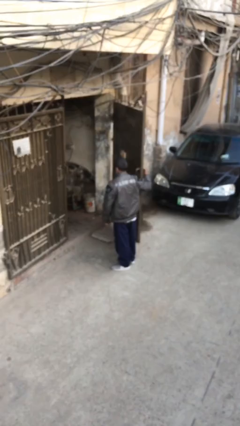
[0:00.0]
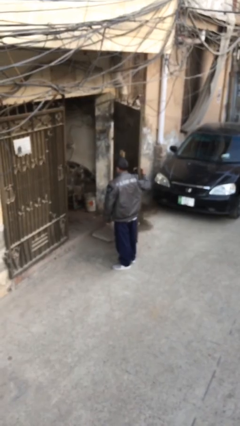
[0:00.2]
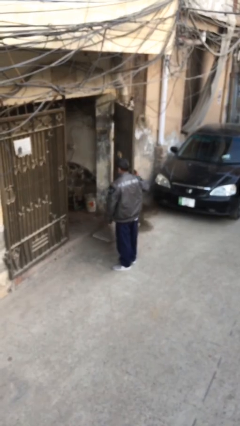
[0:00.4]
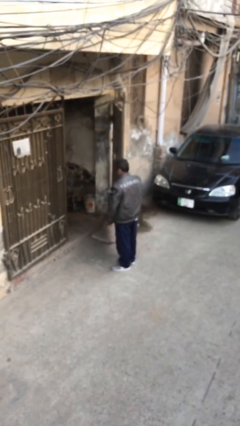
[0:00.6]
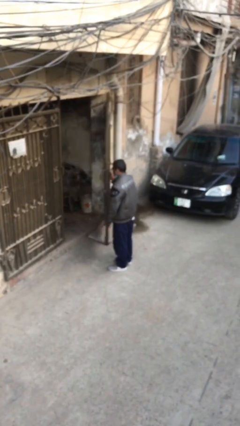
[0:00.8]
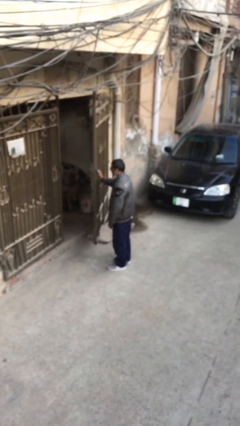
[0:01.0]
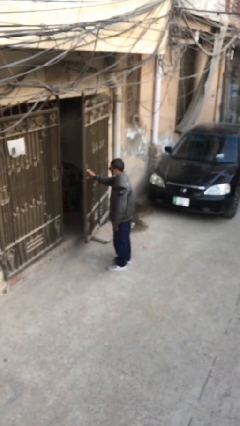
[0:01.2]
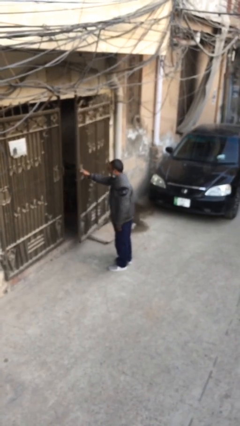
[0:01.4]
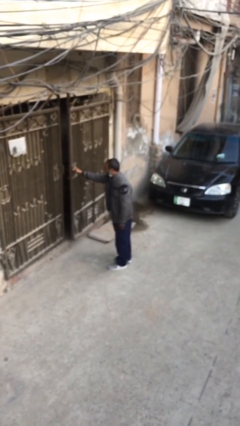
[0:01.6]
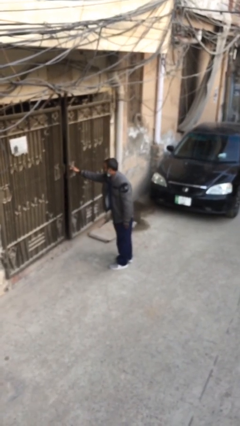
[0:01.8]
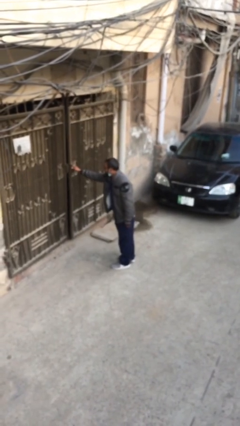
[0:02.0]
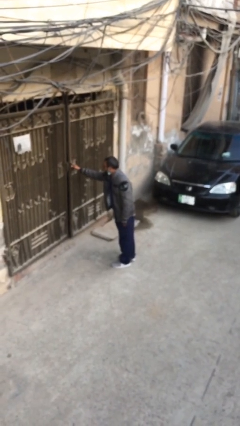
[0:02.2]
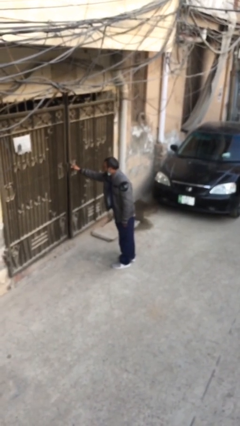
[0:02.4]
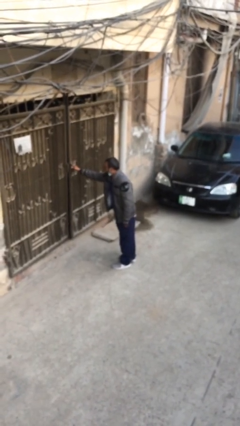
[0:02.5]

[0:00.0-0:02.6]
person closes facility door

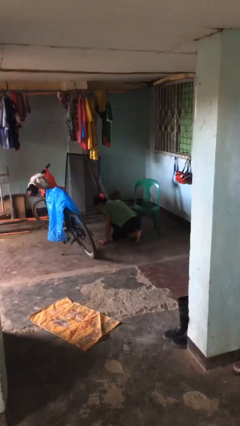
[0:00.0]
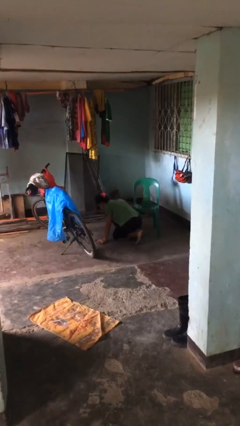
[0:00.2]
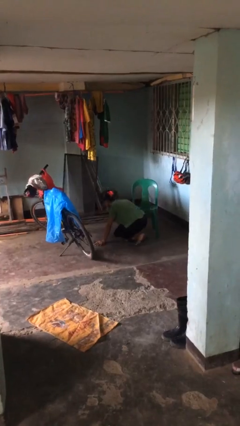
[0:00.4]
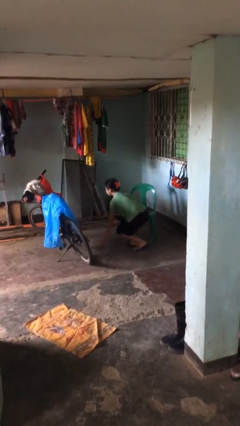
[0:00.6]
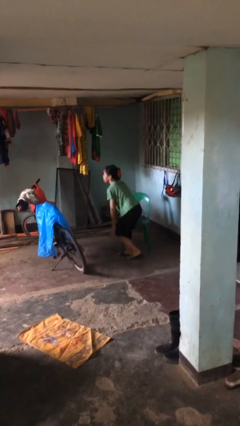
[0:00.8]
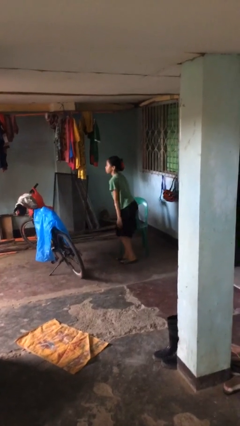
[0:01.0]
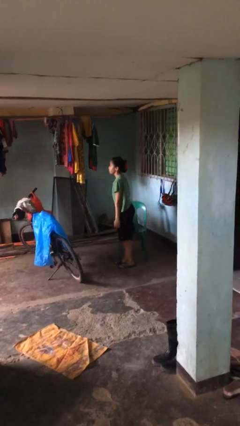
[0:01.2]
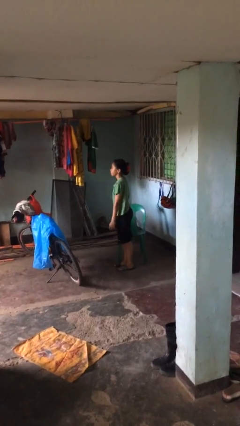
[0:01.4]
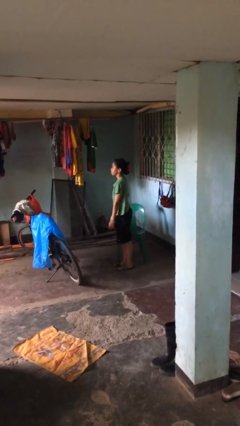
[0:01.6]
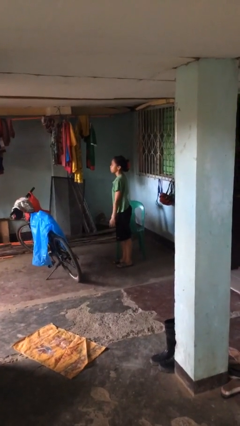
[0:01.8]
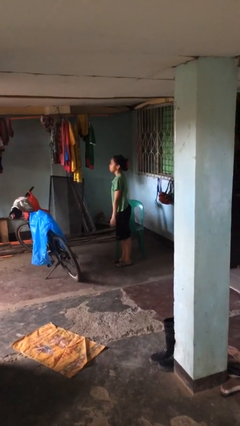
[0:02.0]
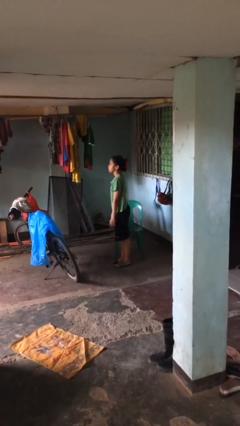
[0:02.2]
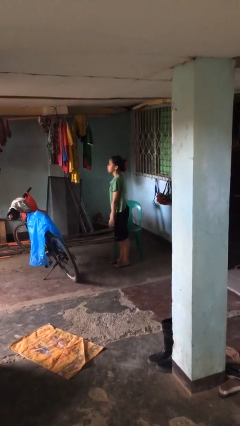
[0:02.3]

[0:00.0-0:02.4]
person stands up from floor

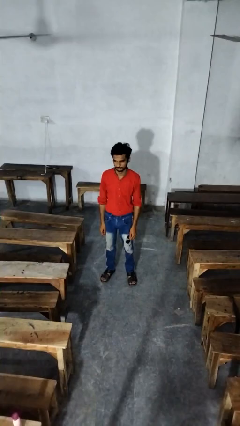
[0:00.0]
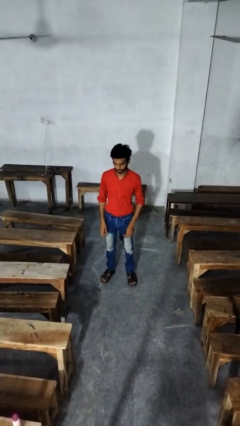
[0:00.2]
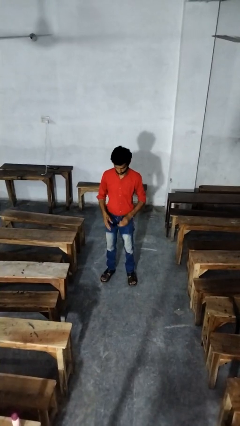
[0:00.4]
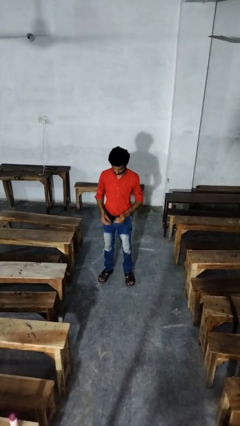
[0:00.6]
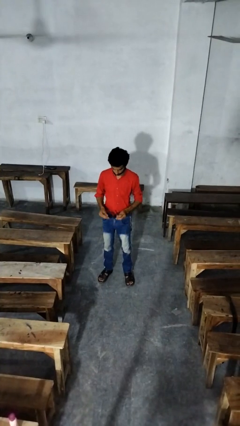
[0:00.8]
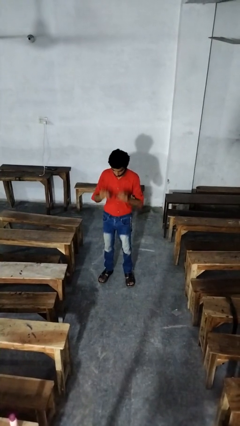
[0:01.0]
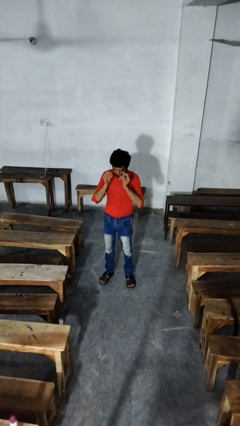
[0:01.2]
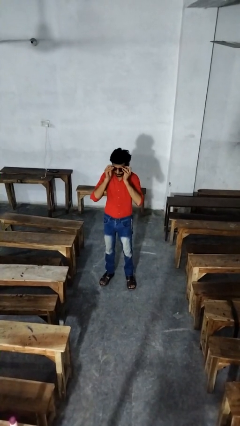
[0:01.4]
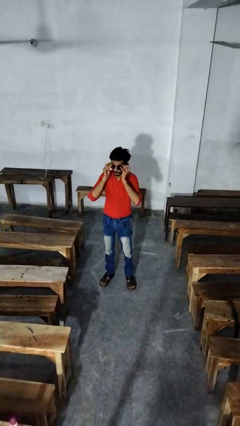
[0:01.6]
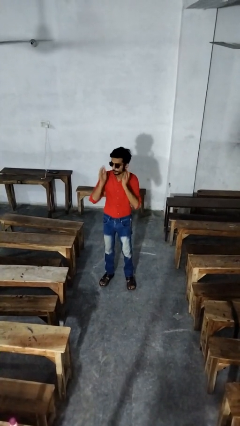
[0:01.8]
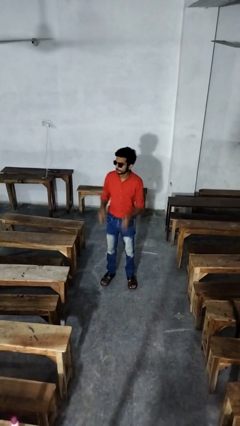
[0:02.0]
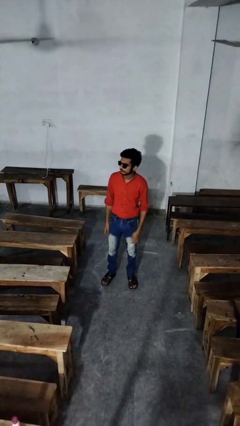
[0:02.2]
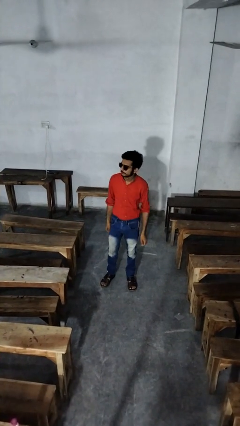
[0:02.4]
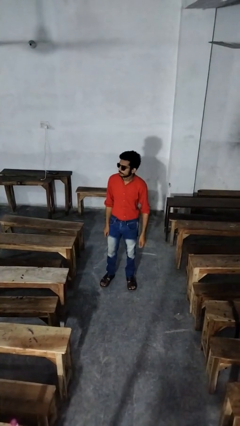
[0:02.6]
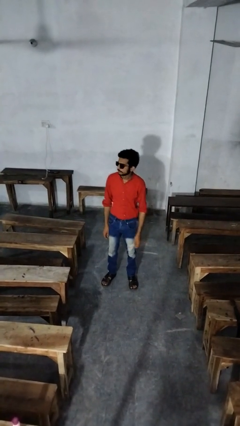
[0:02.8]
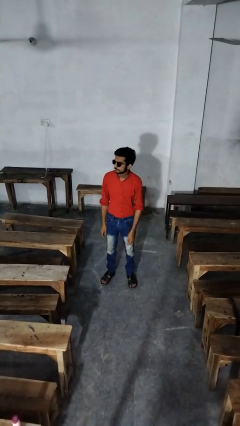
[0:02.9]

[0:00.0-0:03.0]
person puts on sunglasses

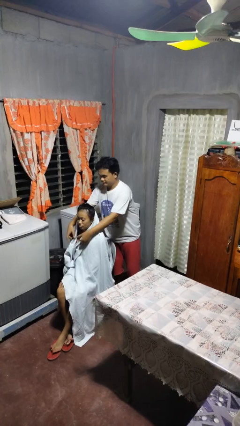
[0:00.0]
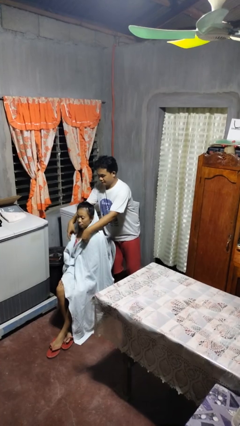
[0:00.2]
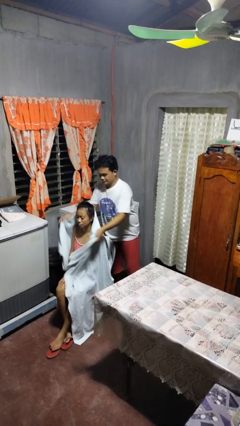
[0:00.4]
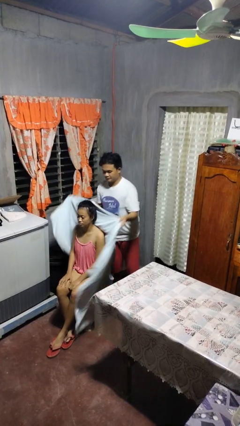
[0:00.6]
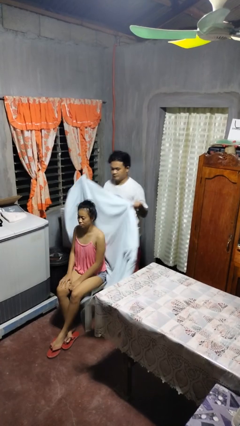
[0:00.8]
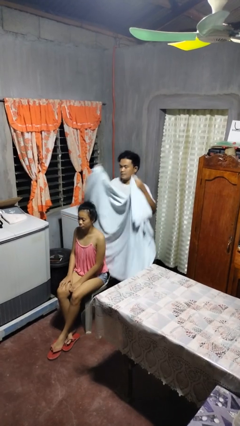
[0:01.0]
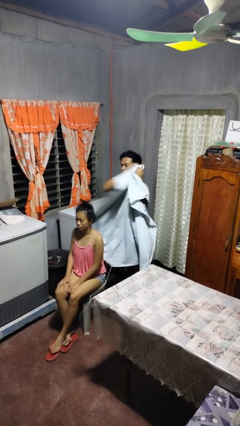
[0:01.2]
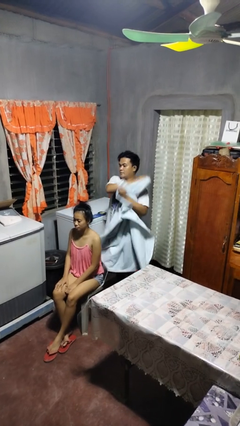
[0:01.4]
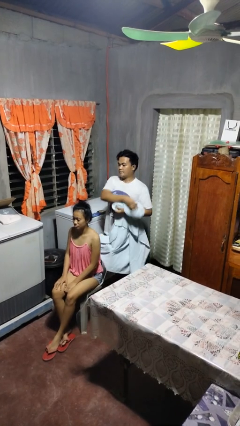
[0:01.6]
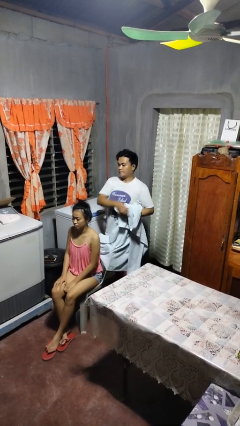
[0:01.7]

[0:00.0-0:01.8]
person uncovers friend with blanket

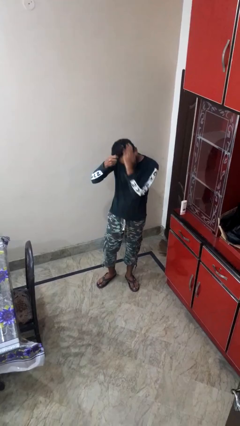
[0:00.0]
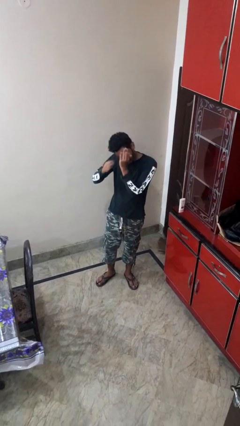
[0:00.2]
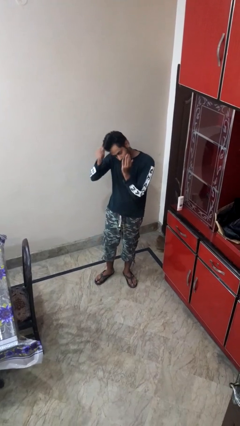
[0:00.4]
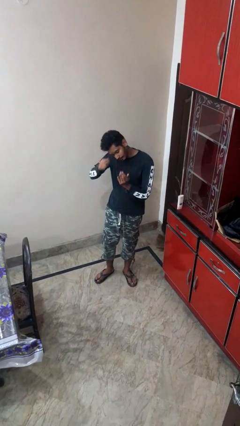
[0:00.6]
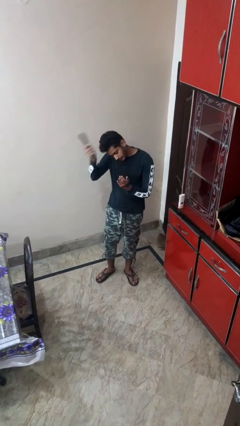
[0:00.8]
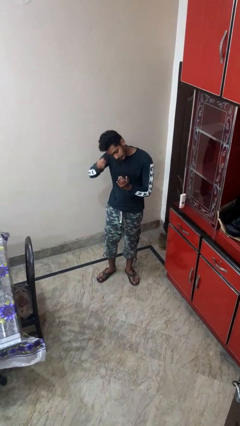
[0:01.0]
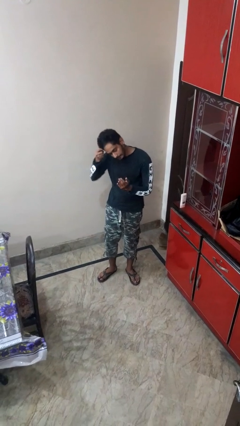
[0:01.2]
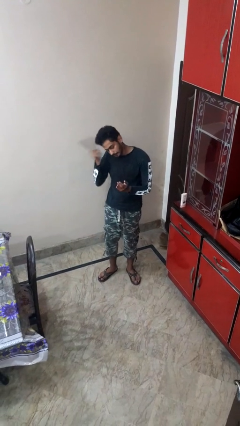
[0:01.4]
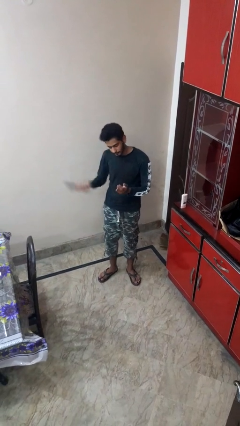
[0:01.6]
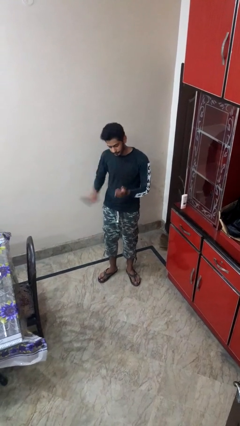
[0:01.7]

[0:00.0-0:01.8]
person brushes hair

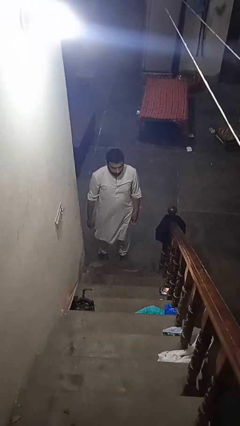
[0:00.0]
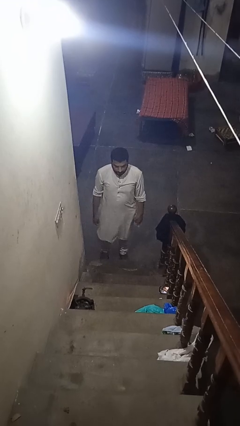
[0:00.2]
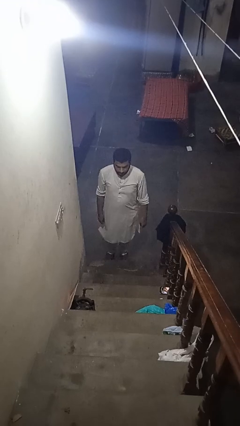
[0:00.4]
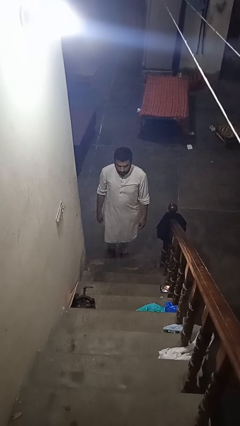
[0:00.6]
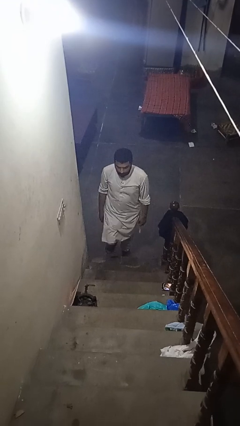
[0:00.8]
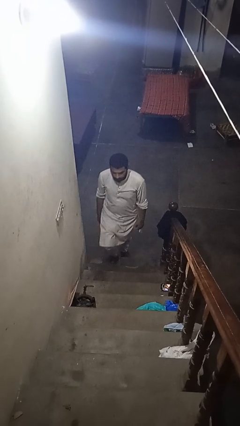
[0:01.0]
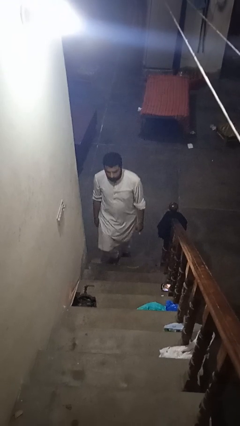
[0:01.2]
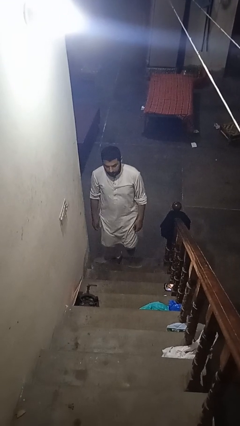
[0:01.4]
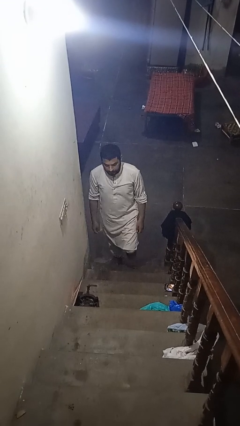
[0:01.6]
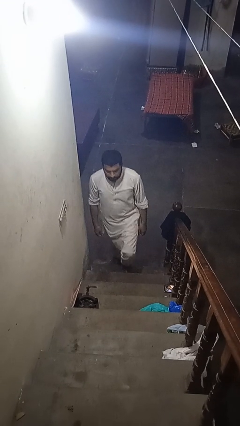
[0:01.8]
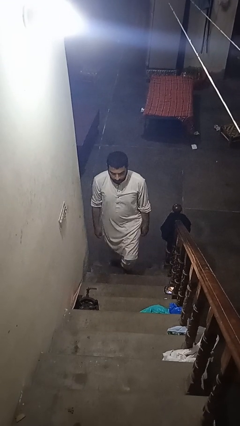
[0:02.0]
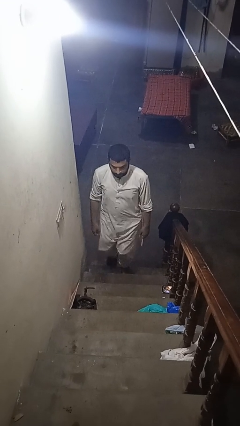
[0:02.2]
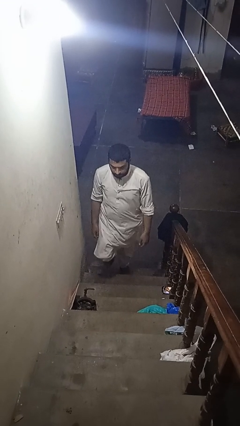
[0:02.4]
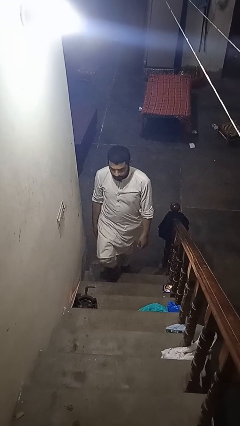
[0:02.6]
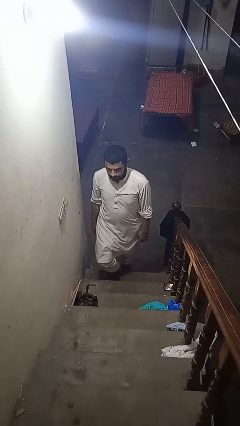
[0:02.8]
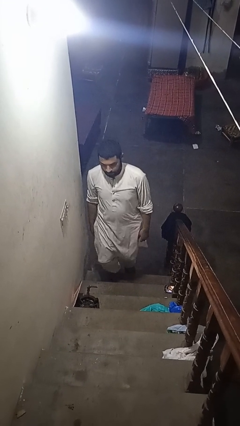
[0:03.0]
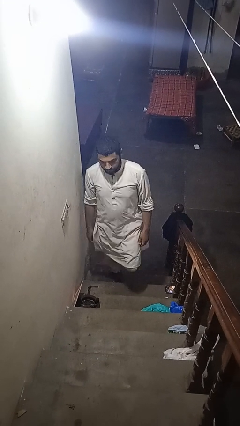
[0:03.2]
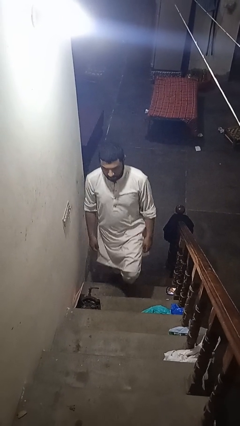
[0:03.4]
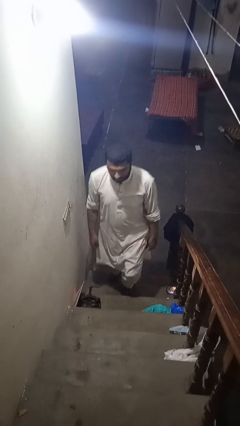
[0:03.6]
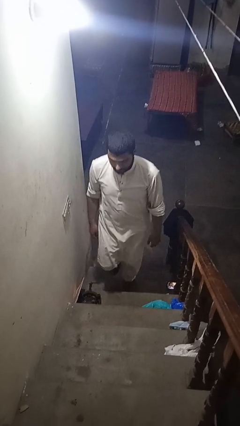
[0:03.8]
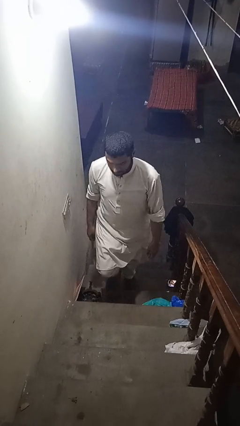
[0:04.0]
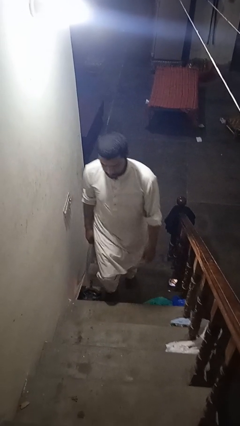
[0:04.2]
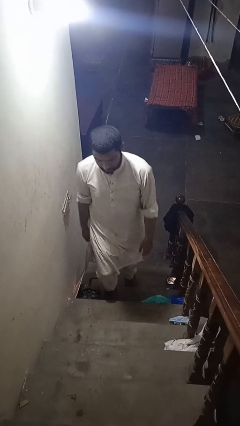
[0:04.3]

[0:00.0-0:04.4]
person climbs up stairs

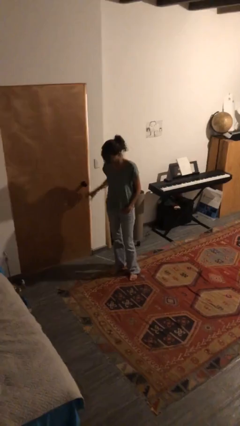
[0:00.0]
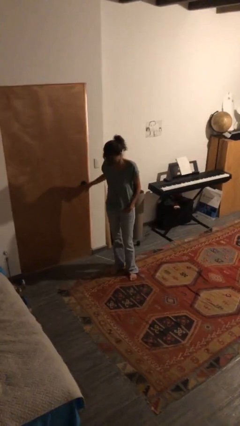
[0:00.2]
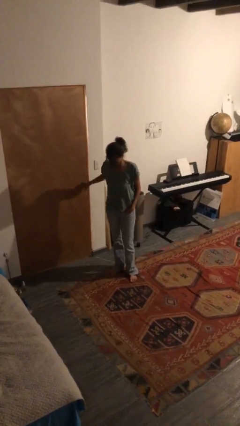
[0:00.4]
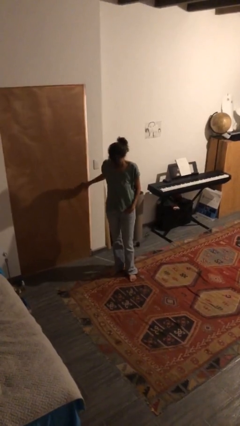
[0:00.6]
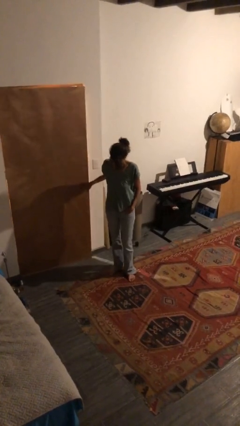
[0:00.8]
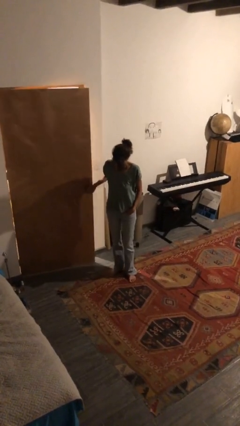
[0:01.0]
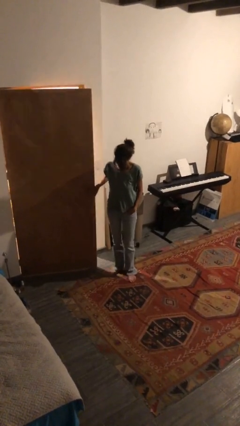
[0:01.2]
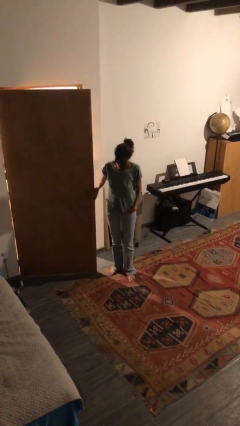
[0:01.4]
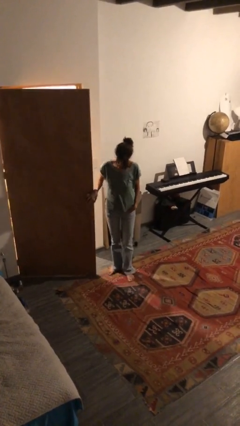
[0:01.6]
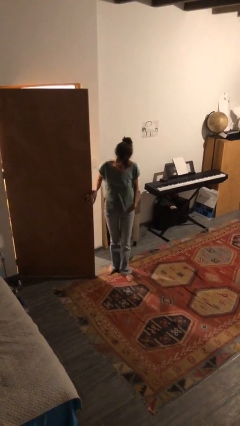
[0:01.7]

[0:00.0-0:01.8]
person opens facility door
